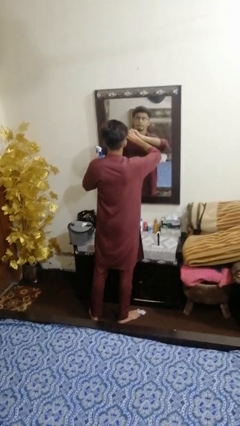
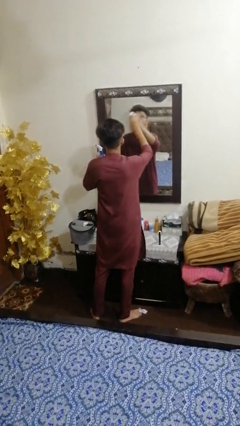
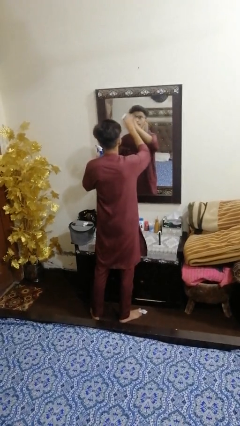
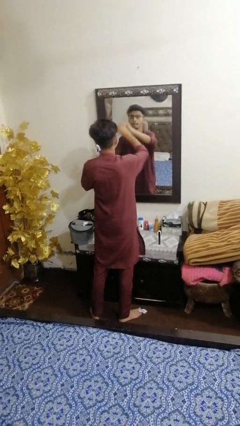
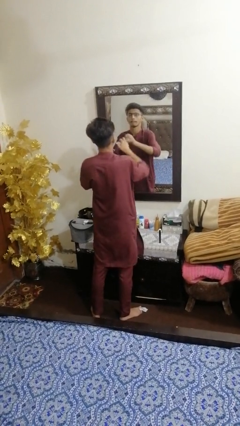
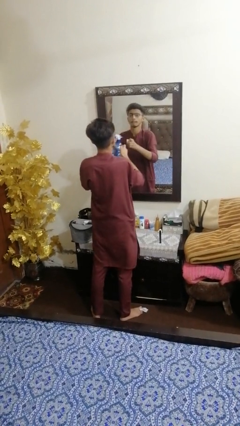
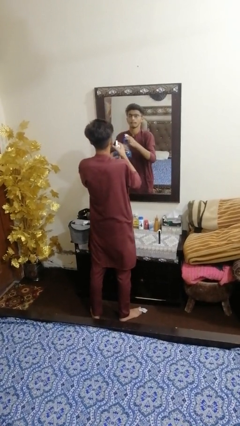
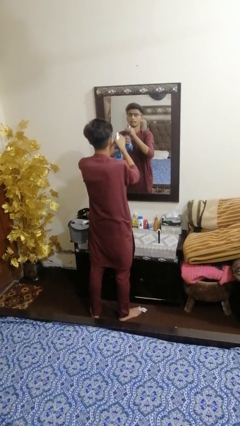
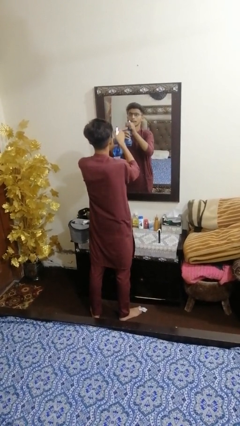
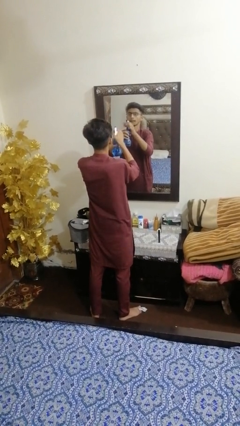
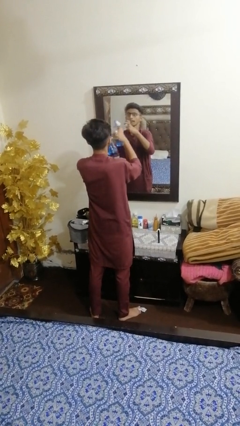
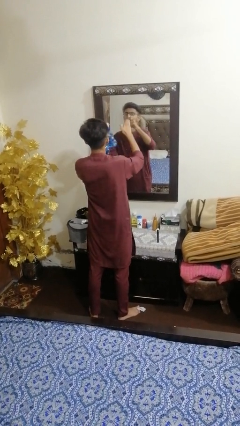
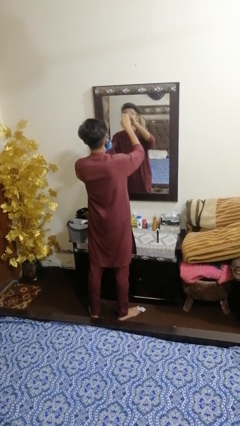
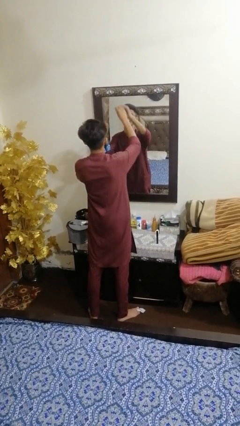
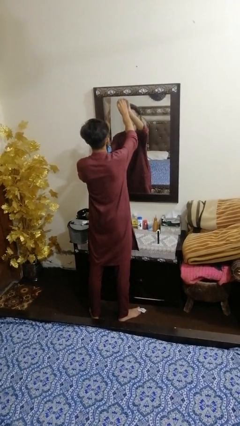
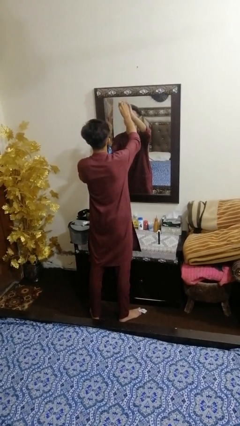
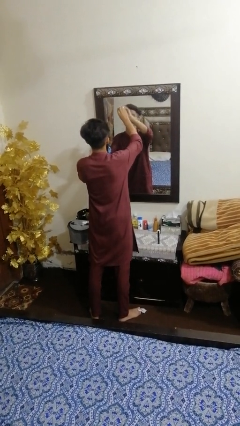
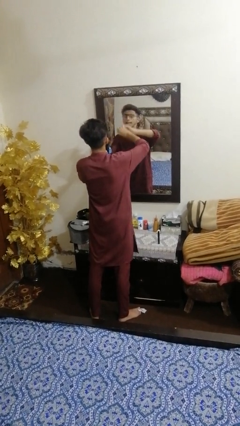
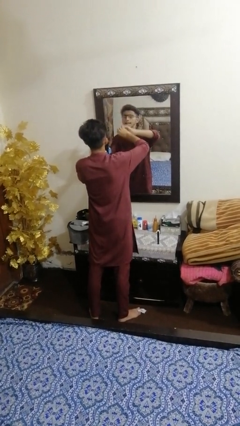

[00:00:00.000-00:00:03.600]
person sprays from bottle

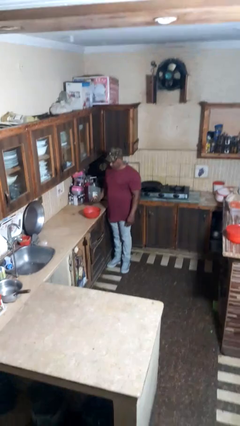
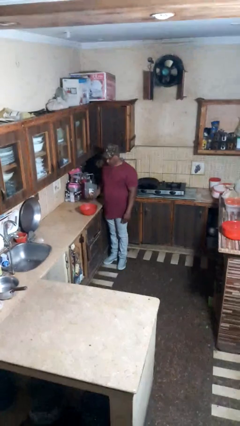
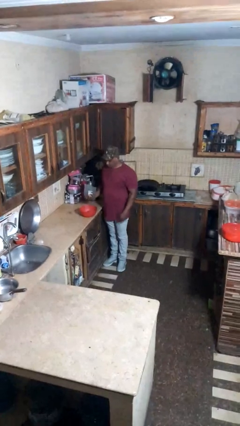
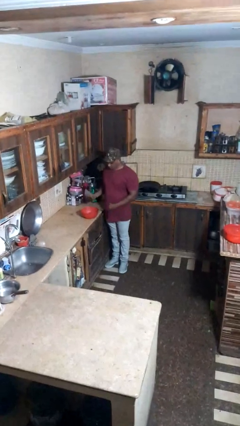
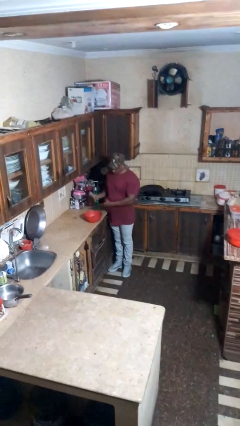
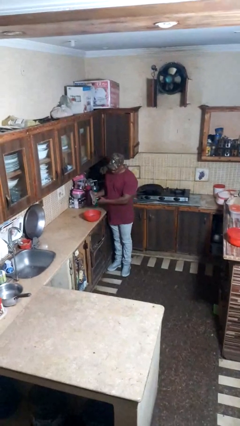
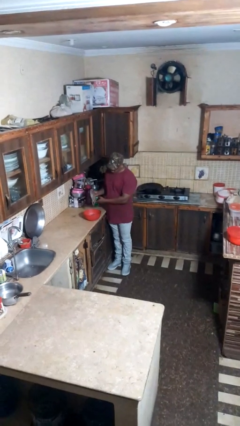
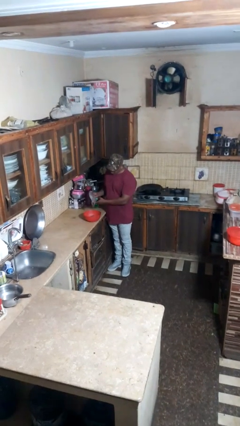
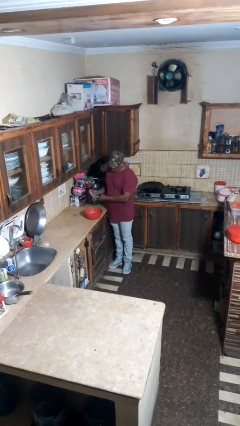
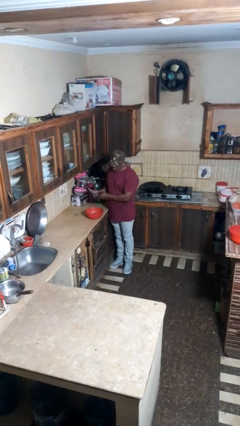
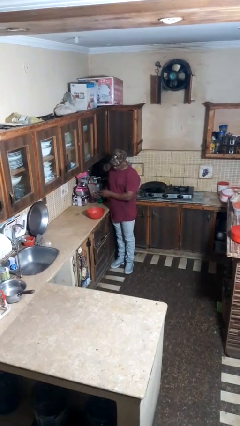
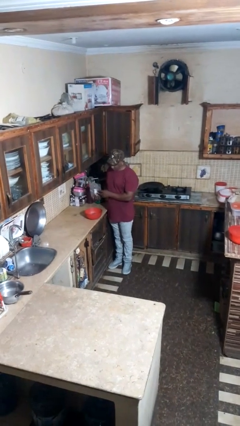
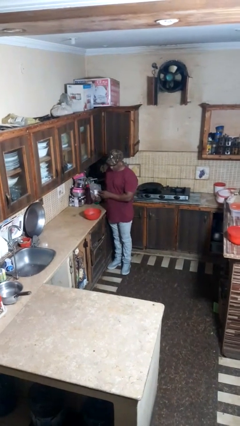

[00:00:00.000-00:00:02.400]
person pours into bowl

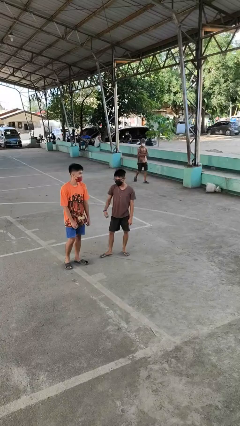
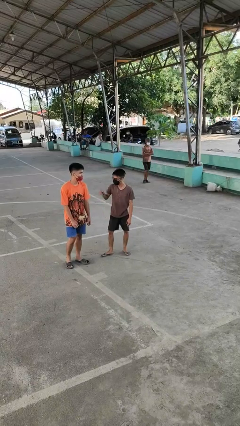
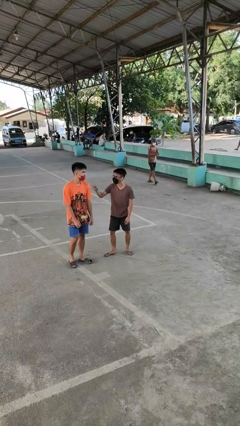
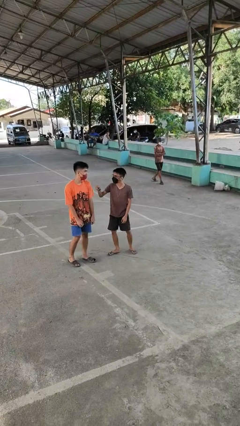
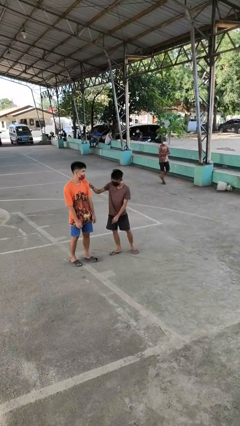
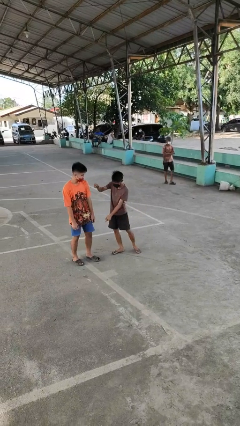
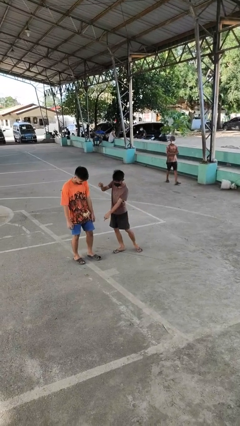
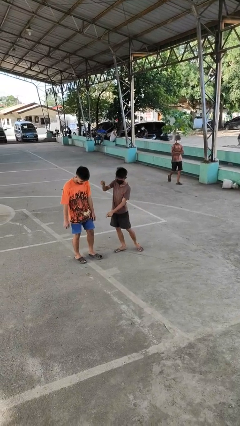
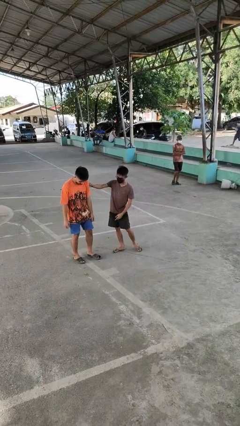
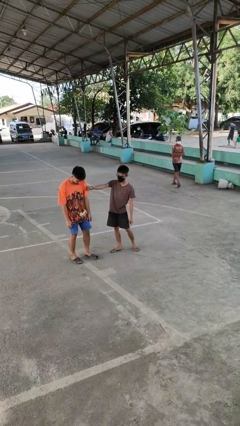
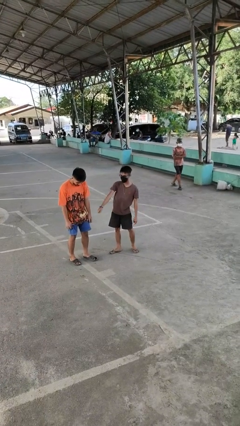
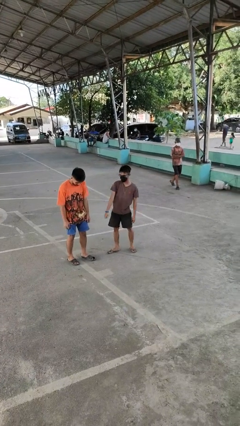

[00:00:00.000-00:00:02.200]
person pounds shoulders of person

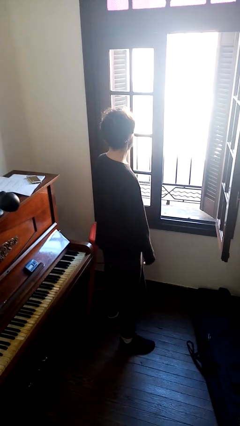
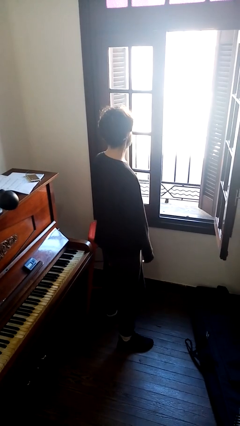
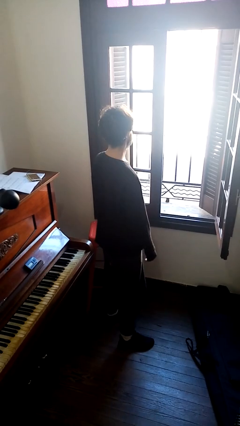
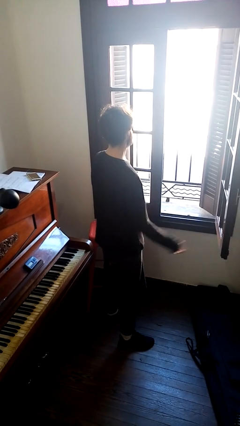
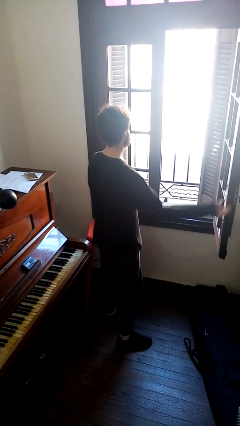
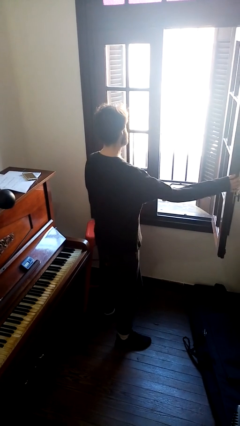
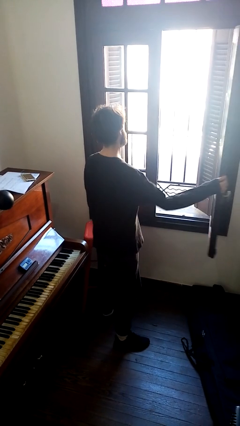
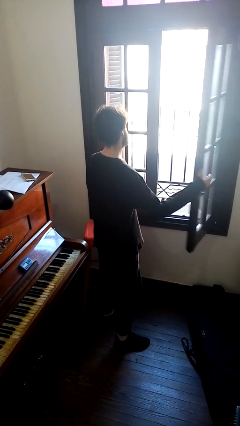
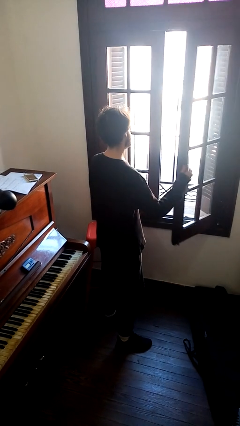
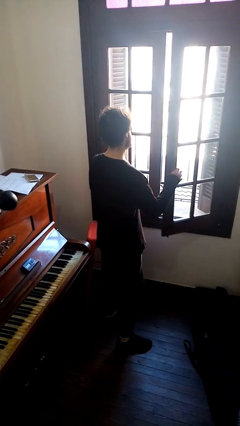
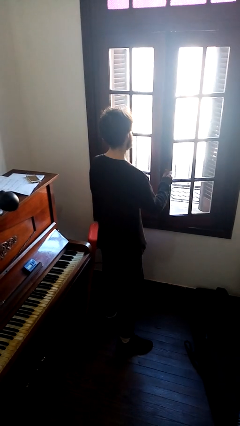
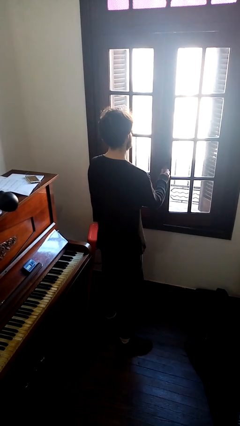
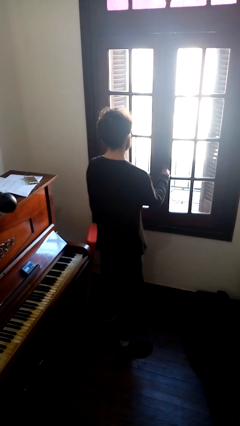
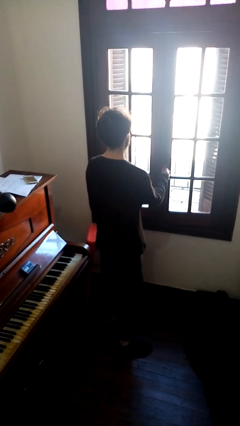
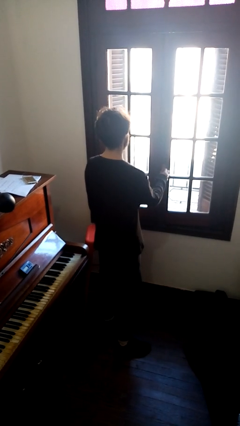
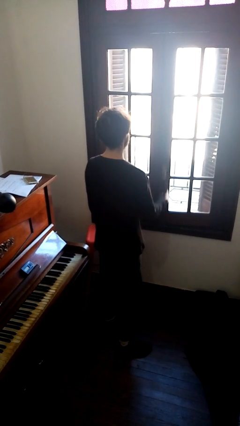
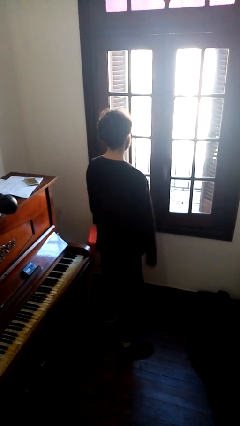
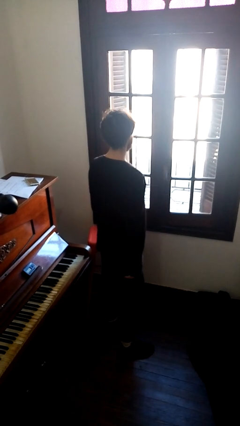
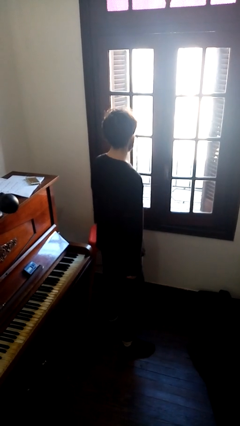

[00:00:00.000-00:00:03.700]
person closes home window

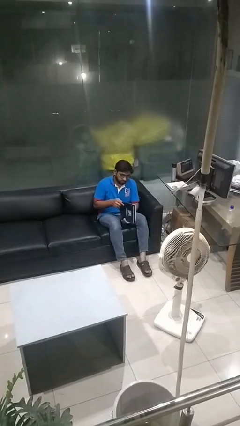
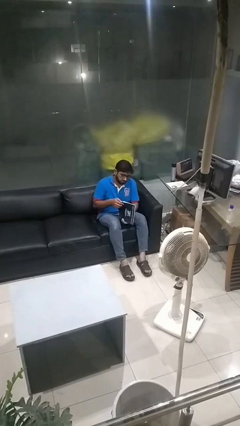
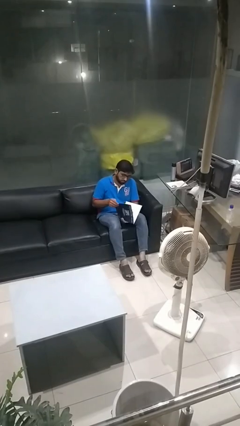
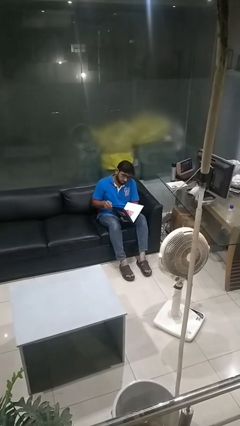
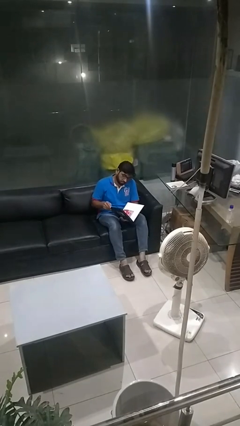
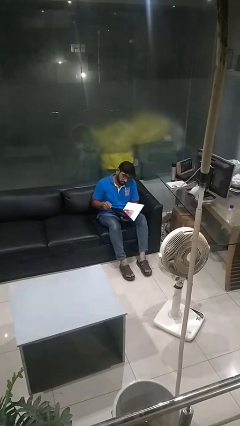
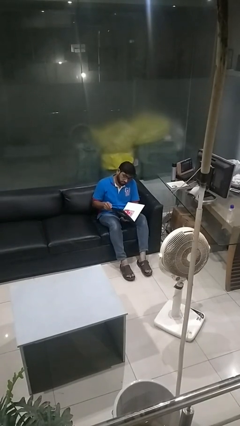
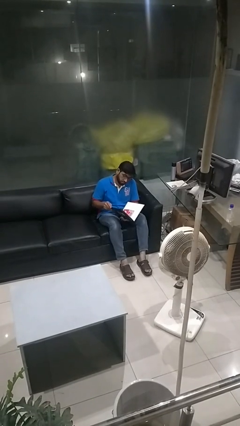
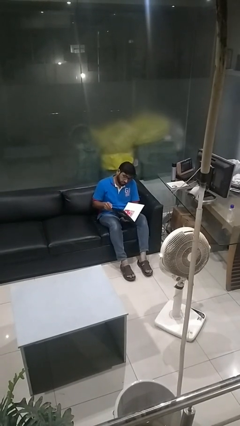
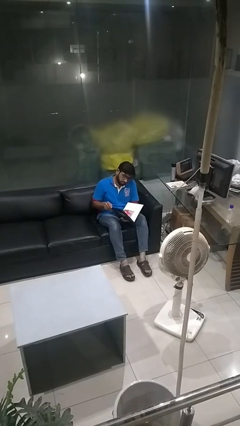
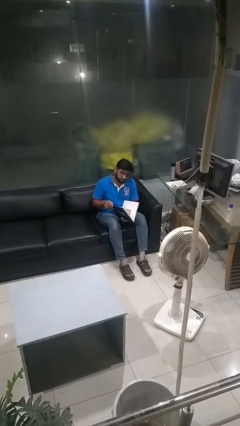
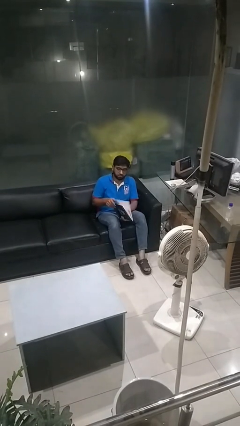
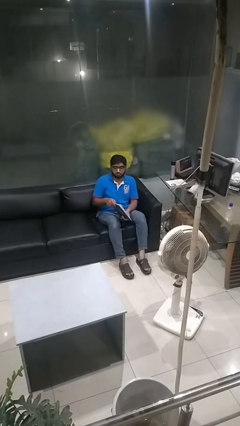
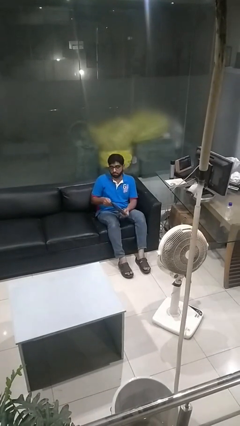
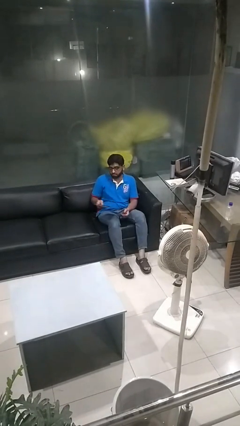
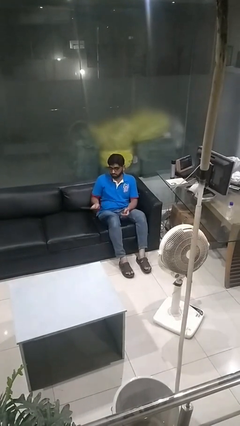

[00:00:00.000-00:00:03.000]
person reads magazine

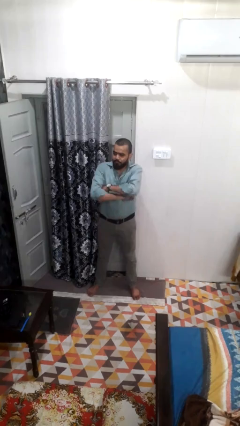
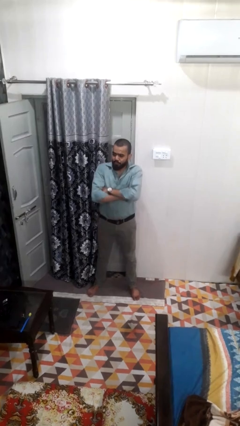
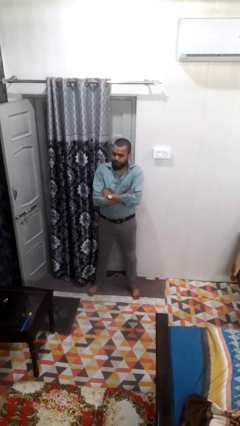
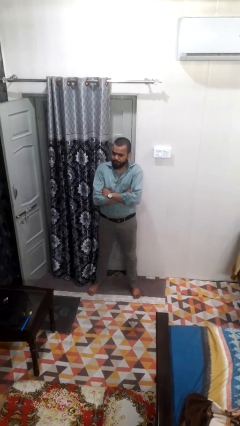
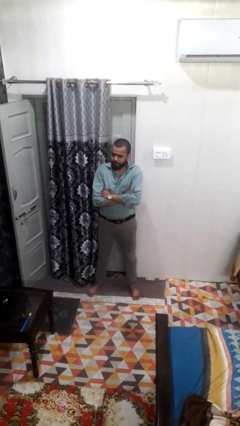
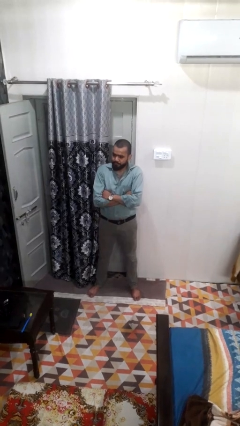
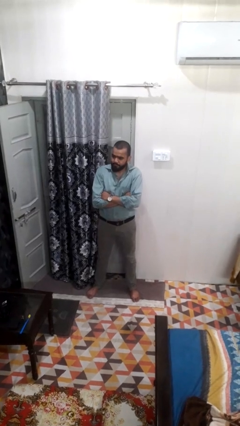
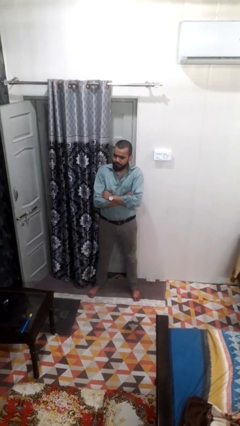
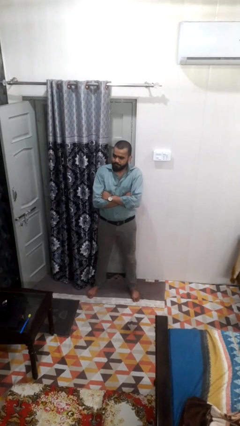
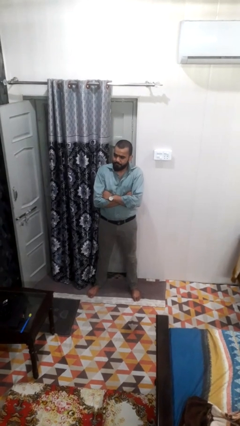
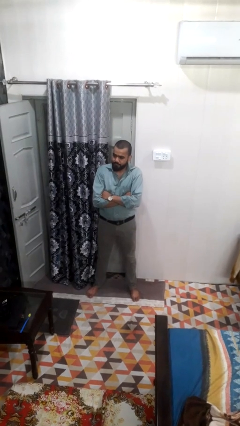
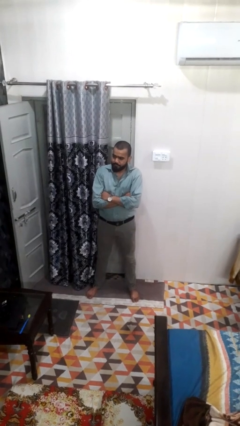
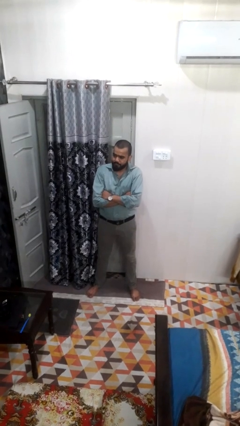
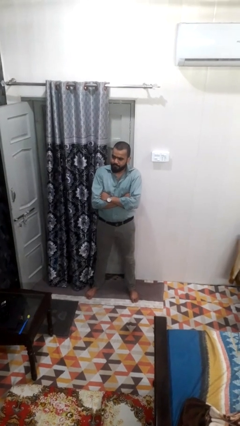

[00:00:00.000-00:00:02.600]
person crosses arms

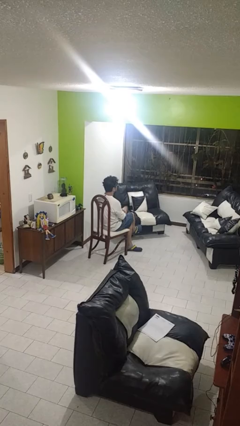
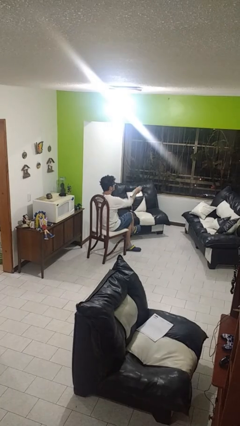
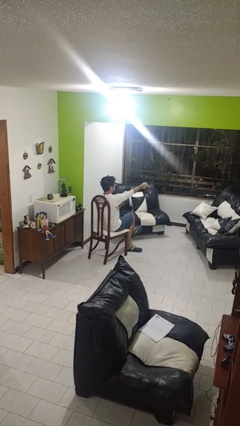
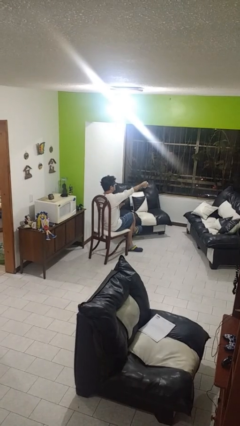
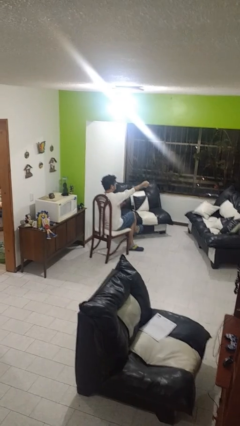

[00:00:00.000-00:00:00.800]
person uses television remote
